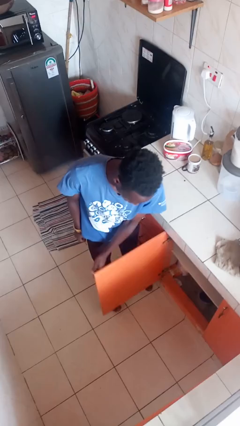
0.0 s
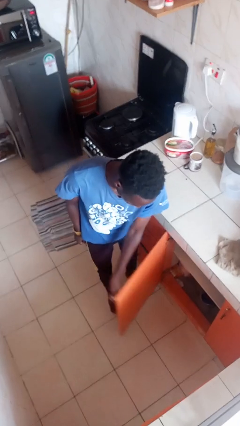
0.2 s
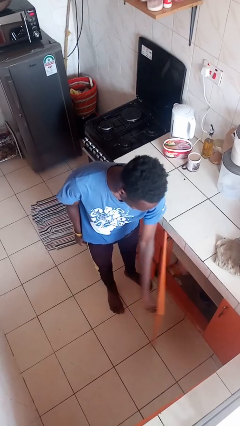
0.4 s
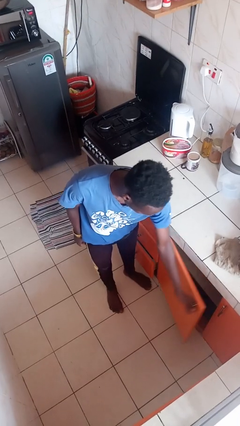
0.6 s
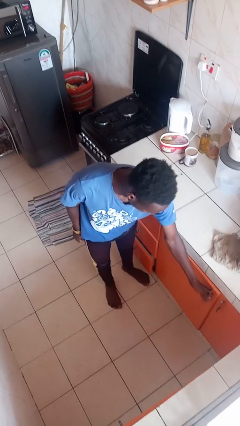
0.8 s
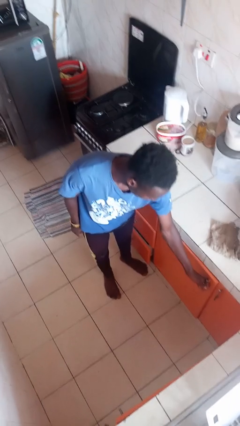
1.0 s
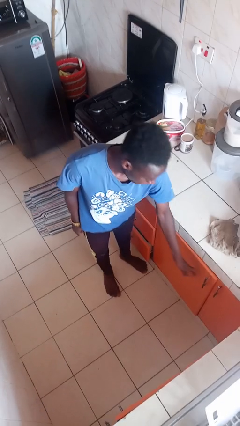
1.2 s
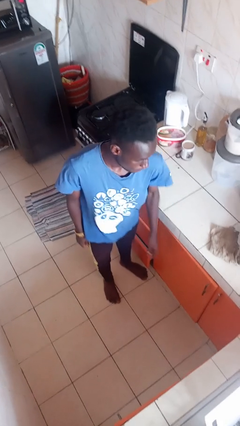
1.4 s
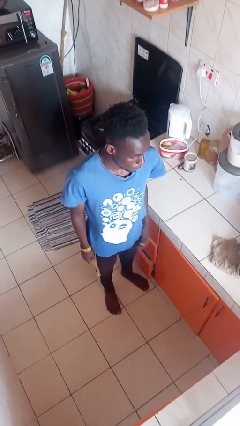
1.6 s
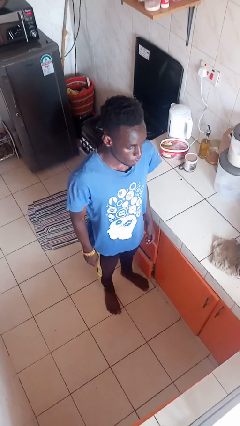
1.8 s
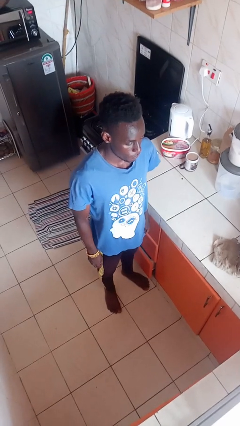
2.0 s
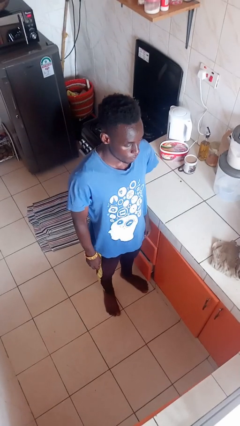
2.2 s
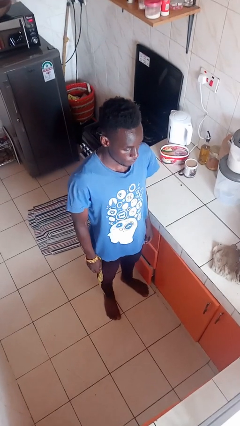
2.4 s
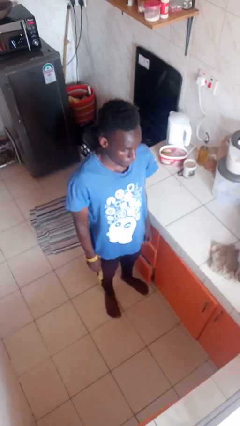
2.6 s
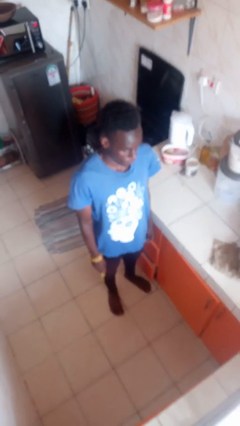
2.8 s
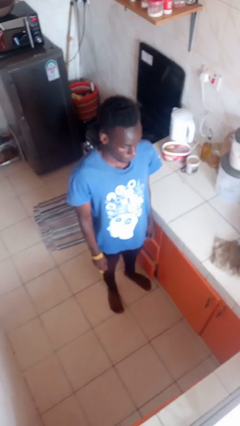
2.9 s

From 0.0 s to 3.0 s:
person closes cabinet

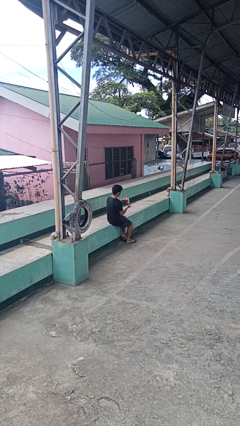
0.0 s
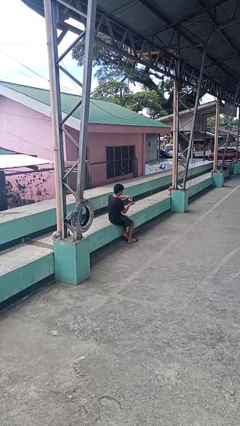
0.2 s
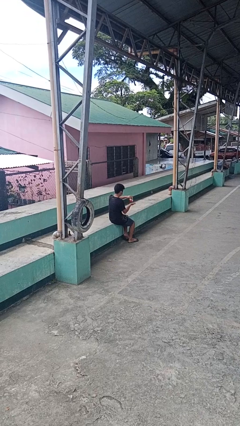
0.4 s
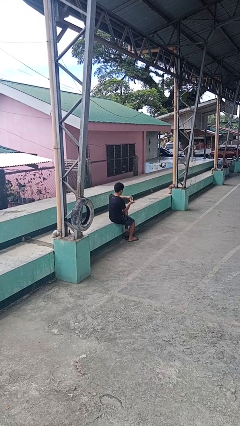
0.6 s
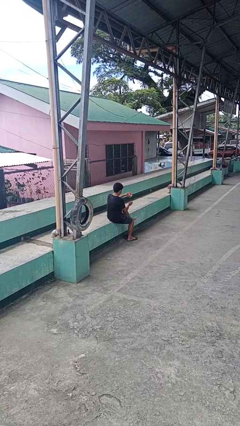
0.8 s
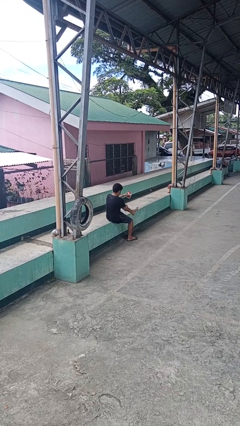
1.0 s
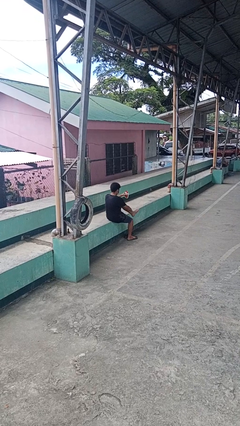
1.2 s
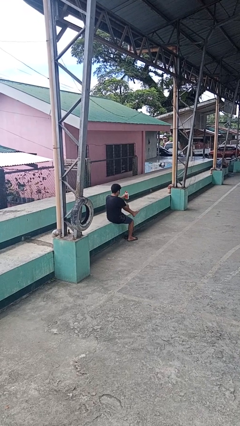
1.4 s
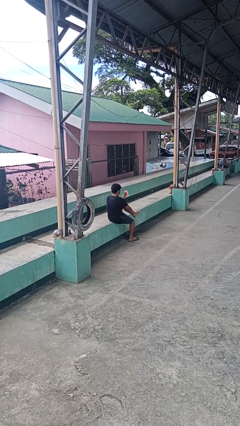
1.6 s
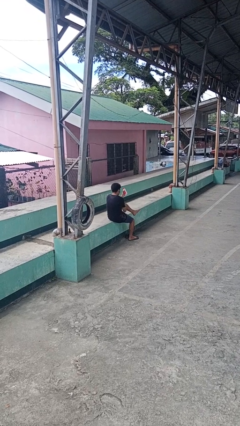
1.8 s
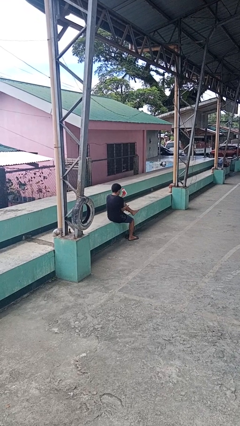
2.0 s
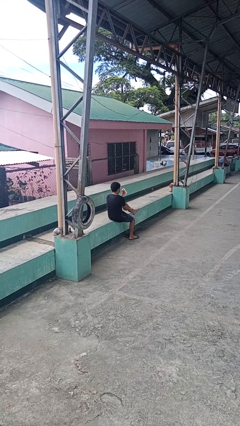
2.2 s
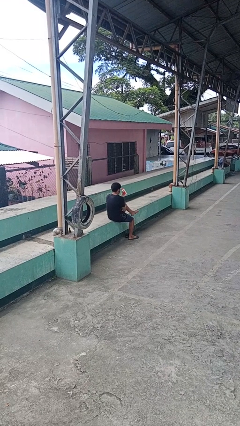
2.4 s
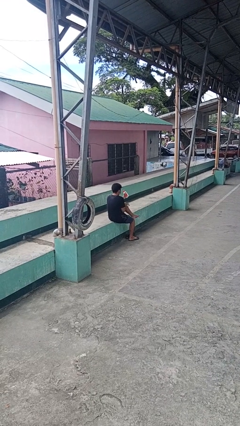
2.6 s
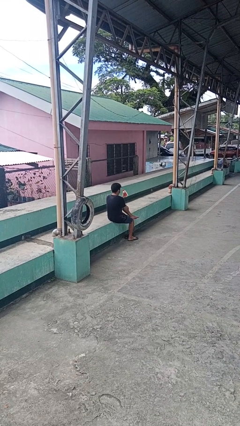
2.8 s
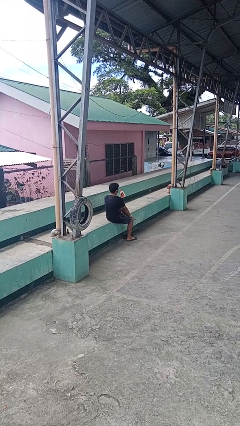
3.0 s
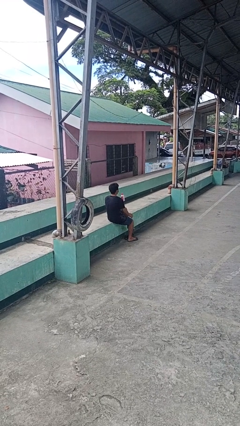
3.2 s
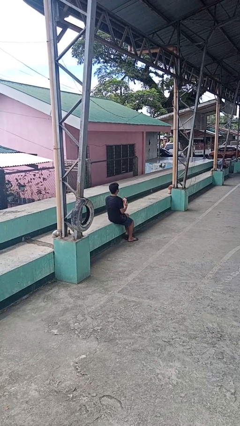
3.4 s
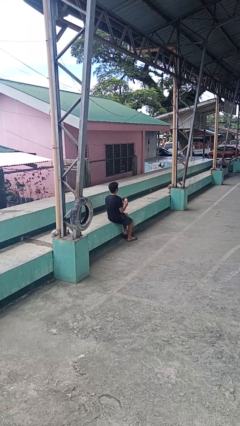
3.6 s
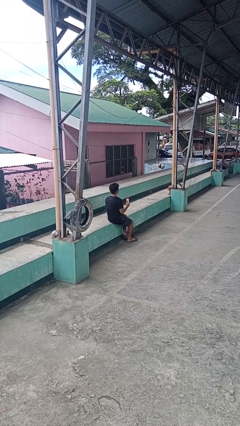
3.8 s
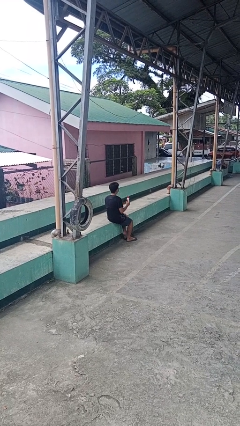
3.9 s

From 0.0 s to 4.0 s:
person applies sunscreen

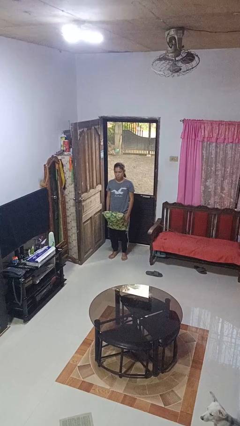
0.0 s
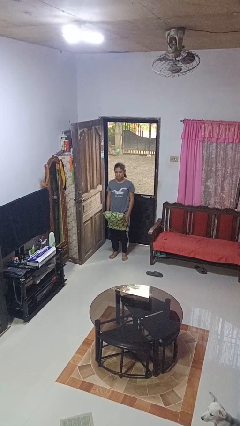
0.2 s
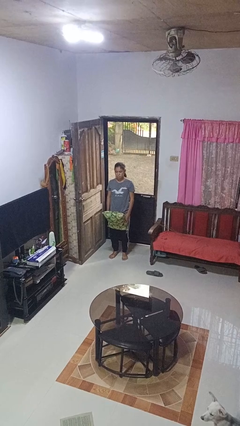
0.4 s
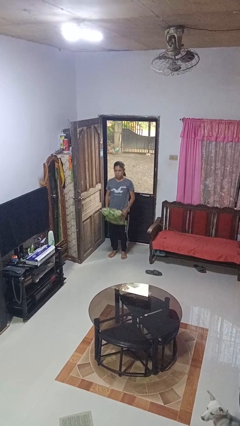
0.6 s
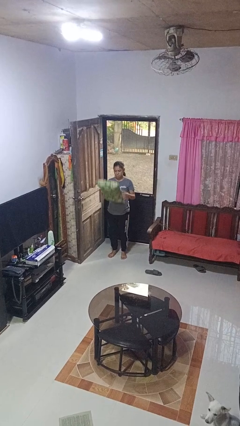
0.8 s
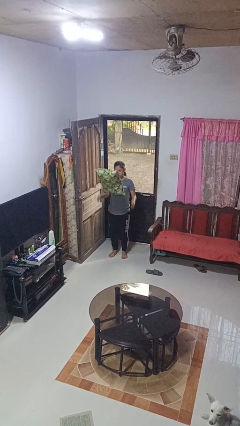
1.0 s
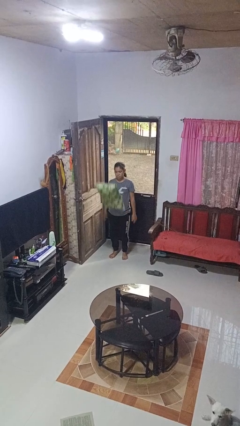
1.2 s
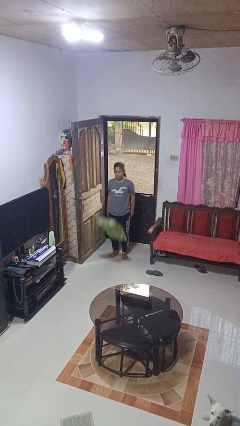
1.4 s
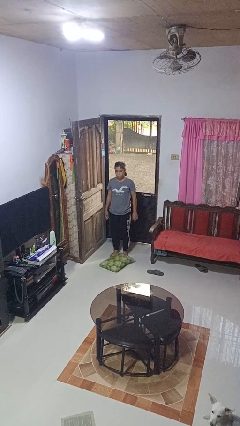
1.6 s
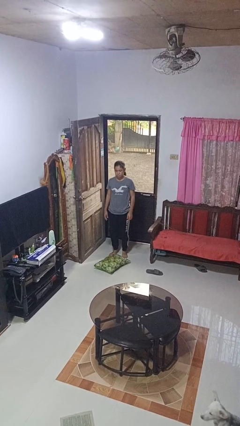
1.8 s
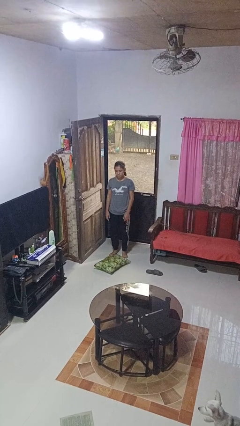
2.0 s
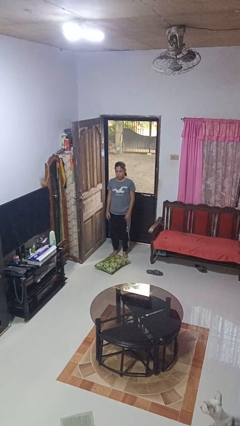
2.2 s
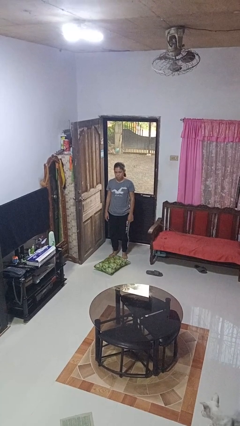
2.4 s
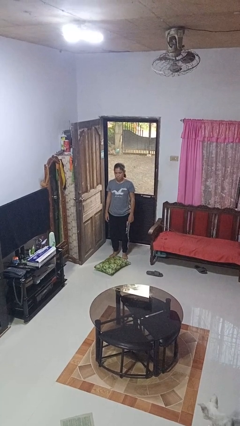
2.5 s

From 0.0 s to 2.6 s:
person throws object into air

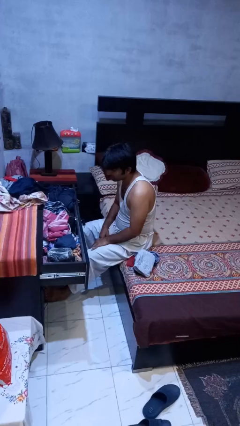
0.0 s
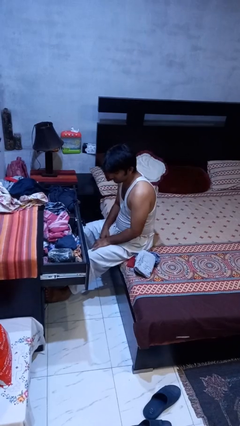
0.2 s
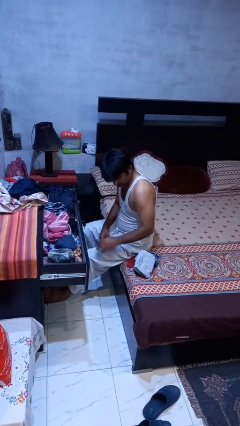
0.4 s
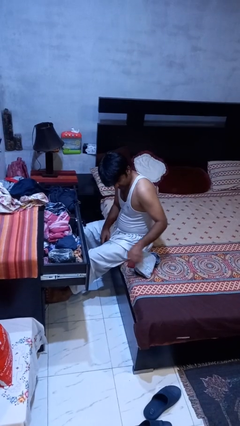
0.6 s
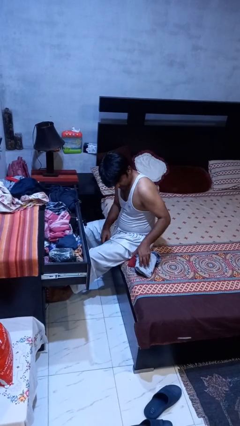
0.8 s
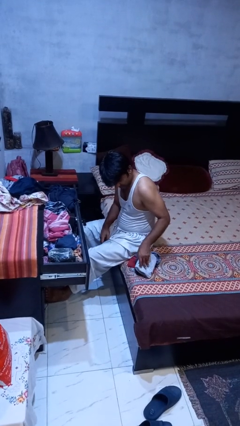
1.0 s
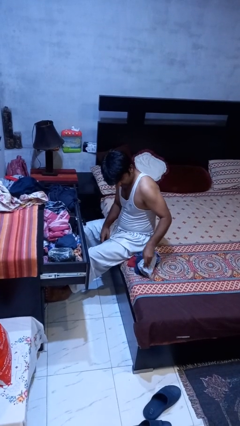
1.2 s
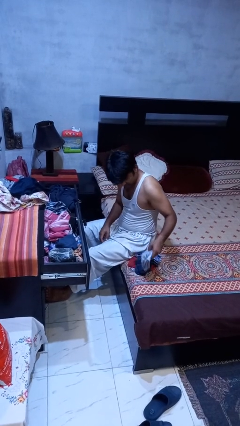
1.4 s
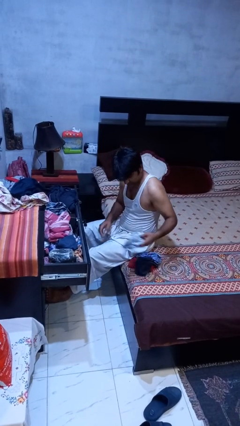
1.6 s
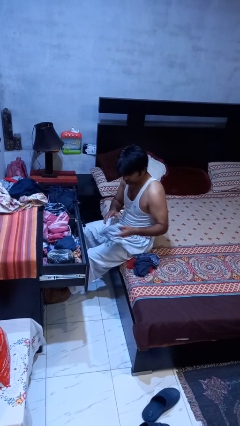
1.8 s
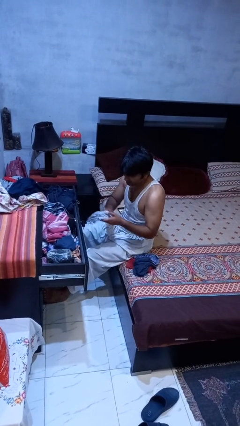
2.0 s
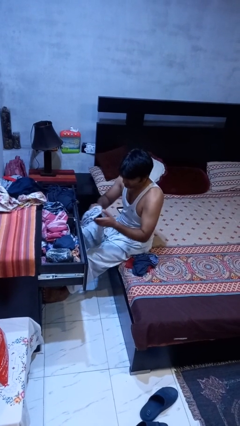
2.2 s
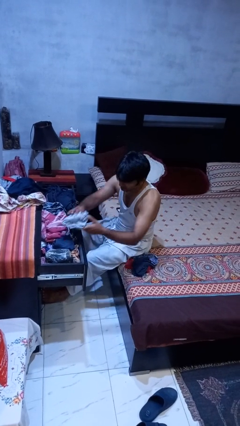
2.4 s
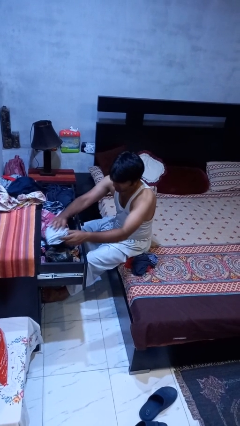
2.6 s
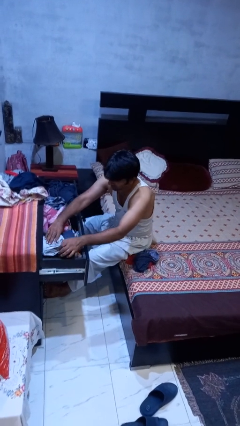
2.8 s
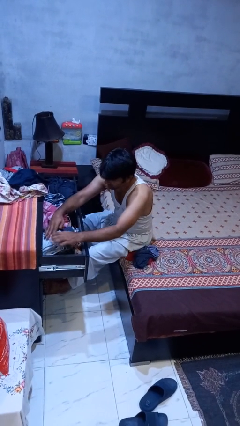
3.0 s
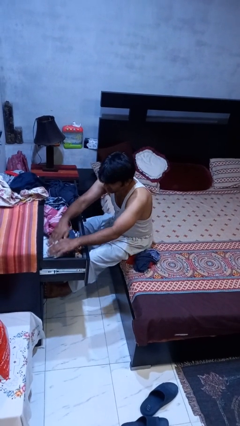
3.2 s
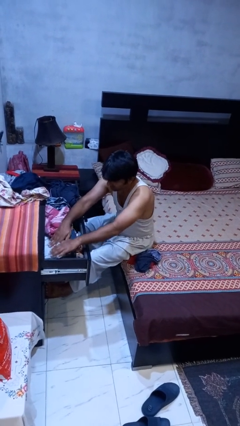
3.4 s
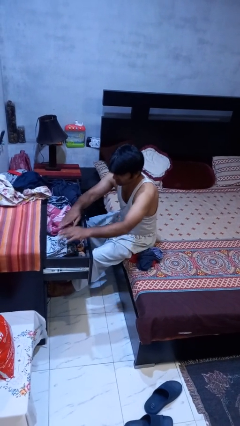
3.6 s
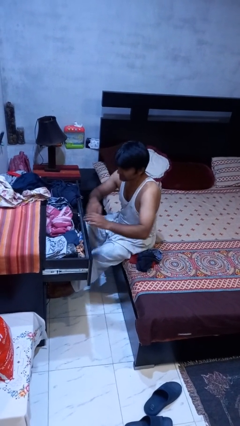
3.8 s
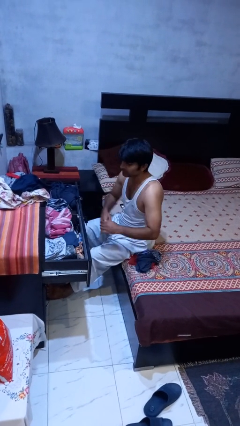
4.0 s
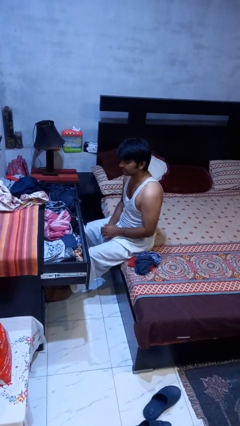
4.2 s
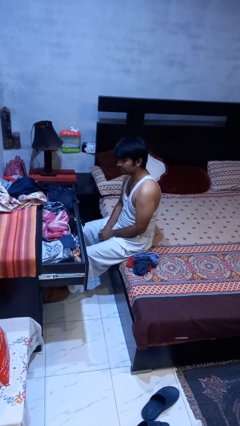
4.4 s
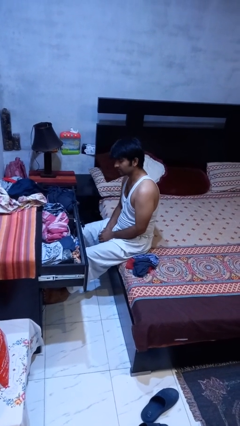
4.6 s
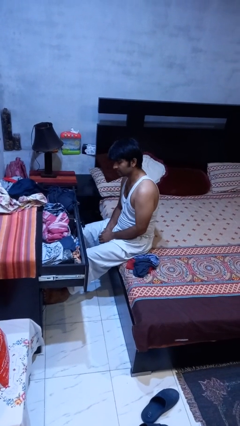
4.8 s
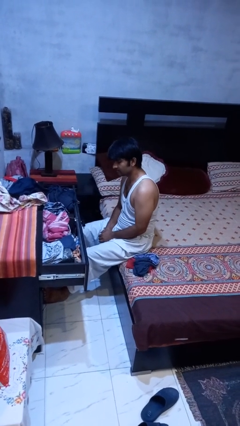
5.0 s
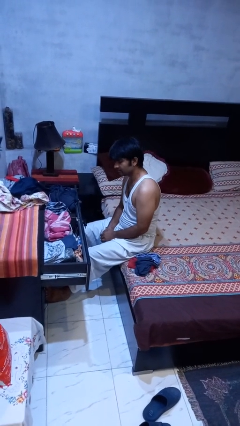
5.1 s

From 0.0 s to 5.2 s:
person puts clothes into dresser

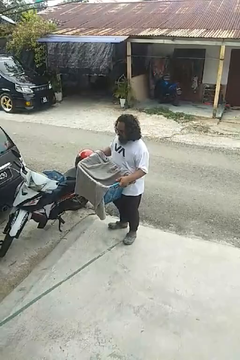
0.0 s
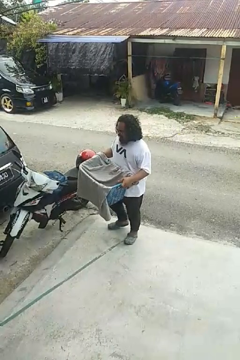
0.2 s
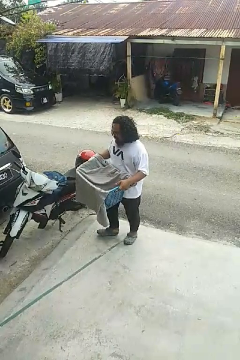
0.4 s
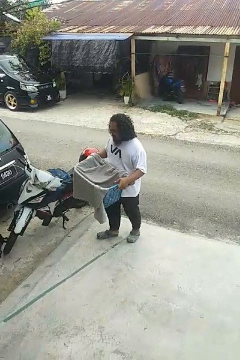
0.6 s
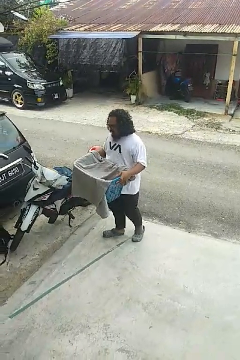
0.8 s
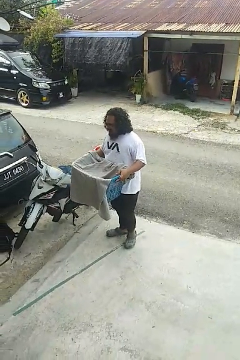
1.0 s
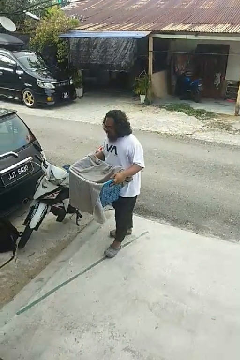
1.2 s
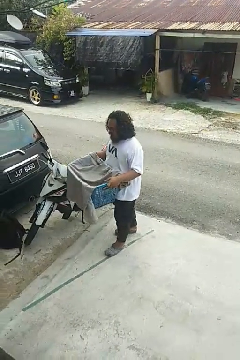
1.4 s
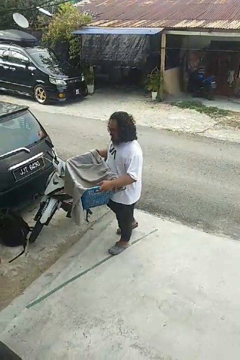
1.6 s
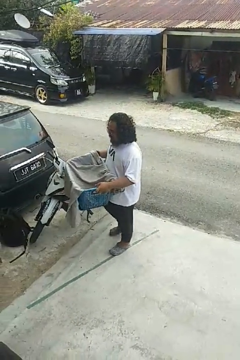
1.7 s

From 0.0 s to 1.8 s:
person carries laundry basket

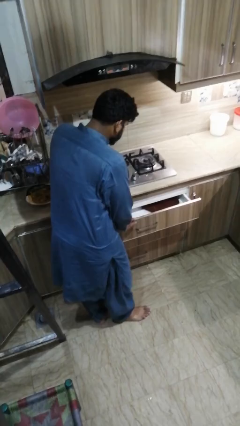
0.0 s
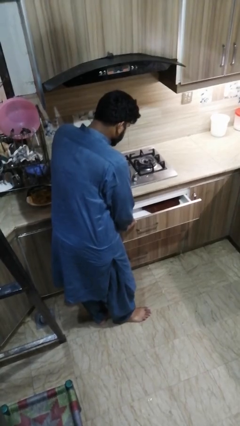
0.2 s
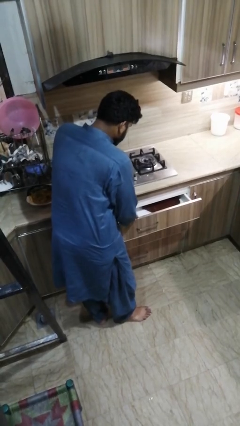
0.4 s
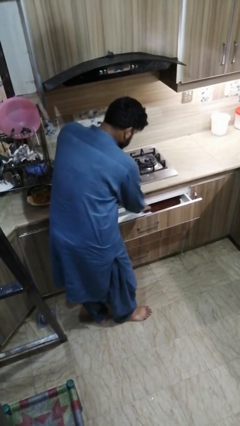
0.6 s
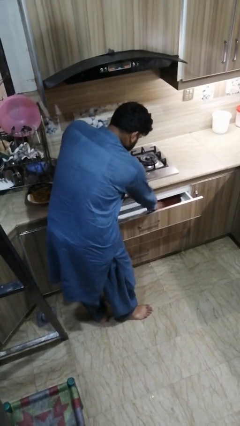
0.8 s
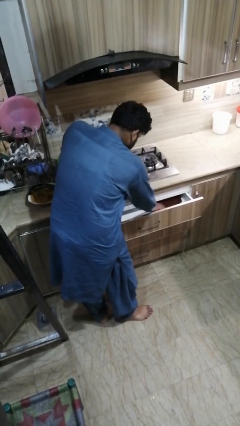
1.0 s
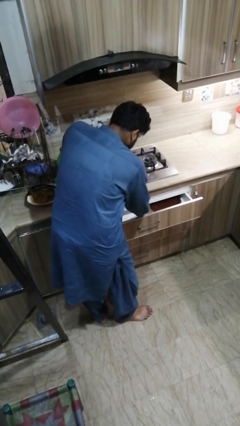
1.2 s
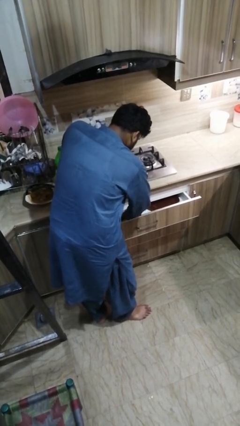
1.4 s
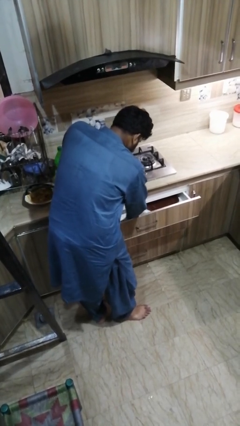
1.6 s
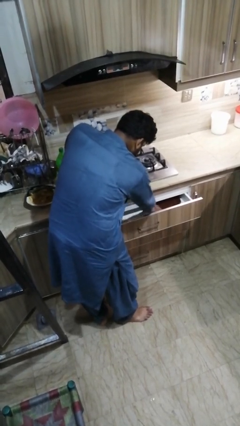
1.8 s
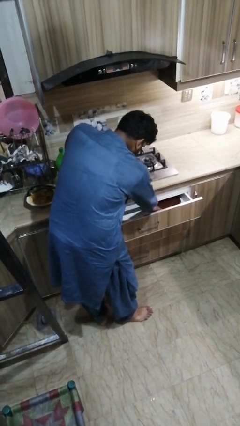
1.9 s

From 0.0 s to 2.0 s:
person searches in kitchen drawer
